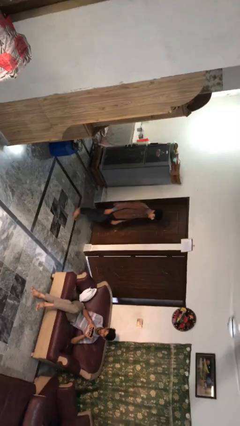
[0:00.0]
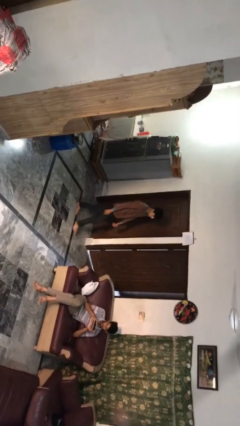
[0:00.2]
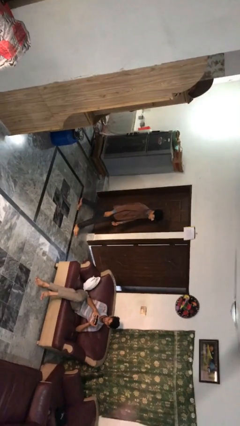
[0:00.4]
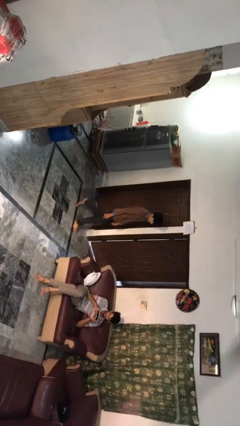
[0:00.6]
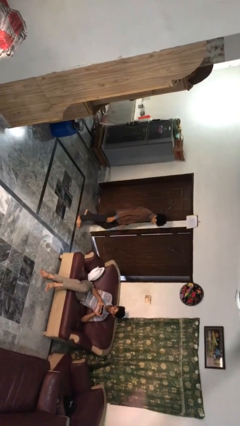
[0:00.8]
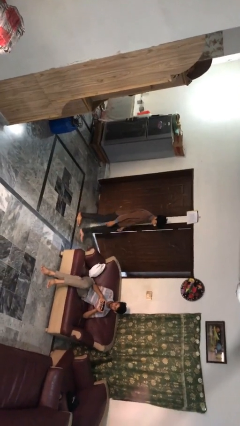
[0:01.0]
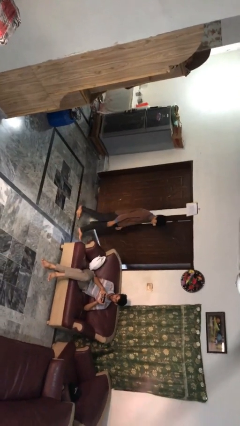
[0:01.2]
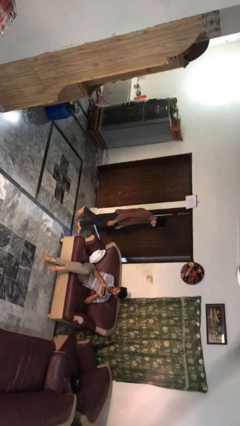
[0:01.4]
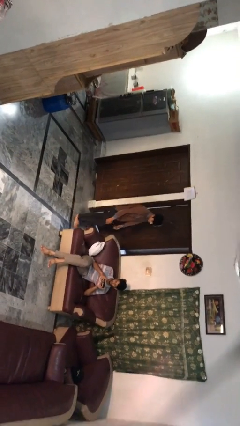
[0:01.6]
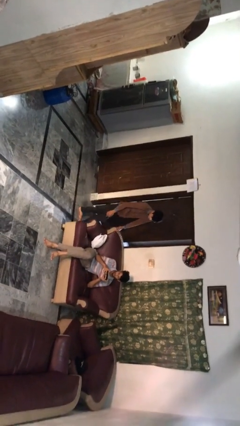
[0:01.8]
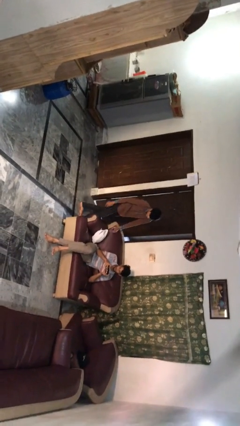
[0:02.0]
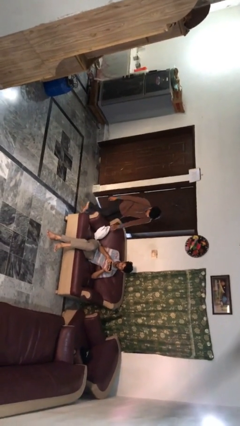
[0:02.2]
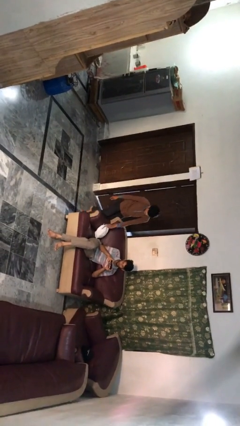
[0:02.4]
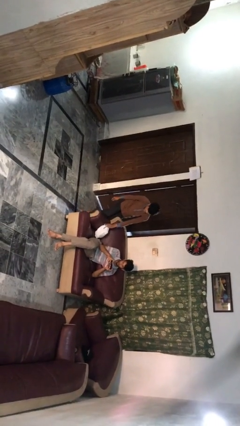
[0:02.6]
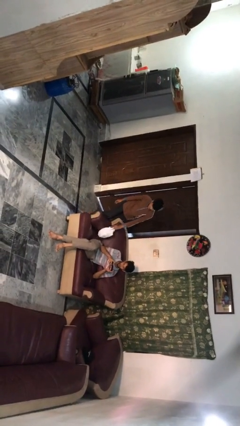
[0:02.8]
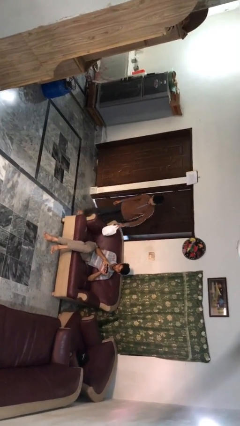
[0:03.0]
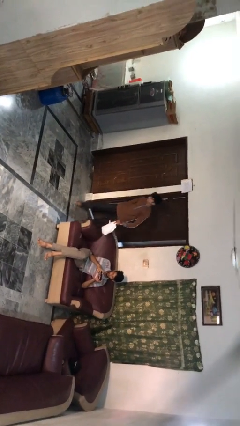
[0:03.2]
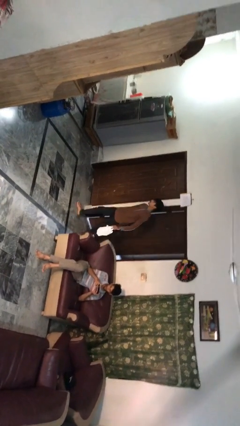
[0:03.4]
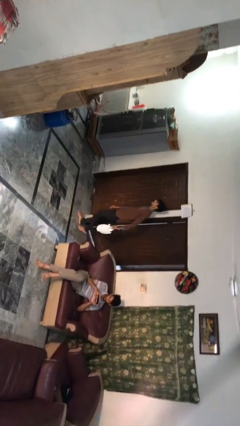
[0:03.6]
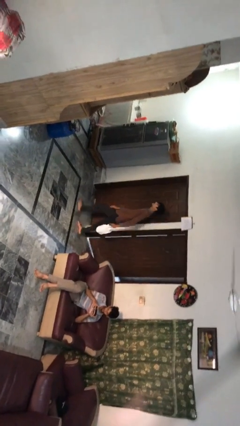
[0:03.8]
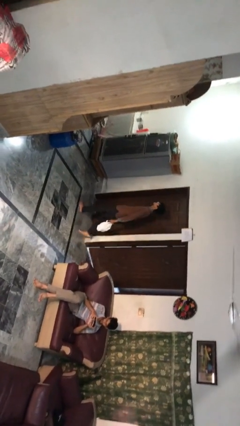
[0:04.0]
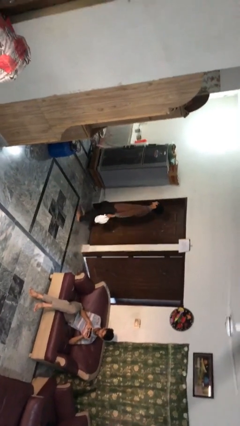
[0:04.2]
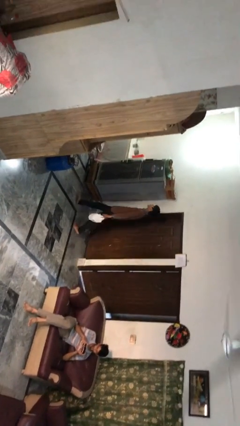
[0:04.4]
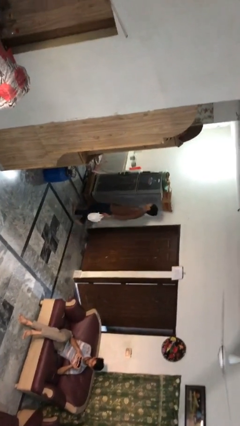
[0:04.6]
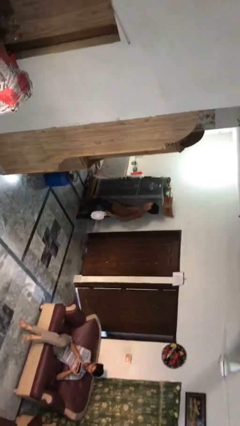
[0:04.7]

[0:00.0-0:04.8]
person steals object from person

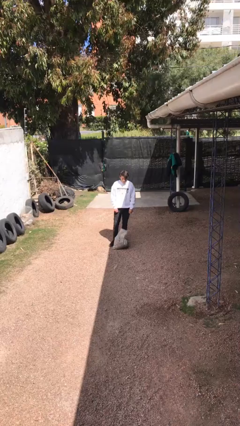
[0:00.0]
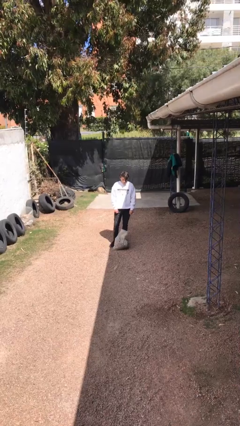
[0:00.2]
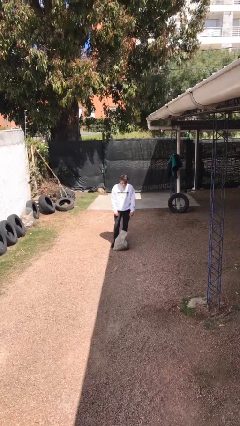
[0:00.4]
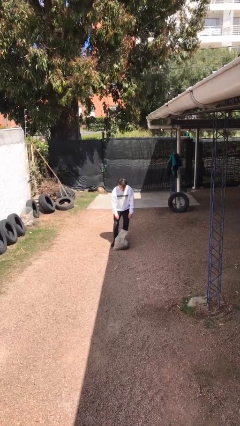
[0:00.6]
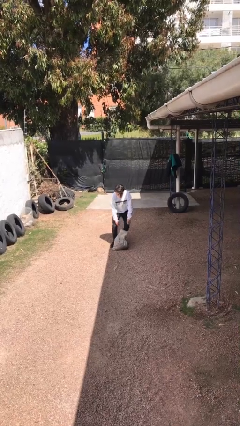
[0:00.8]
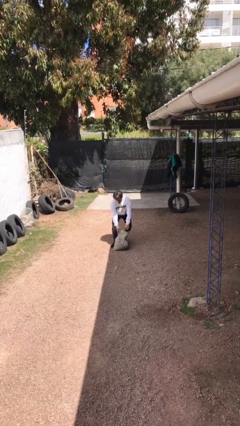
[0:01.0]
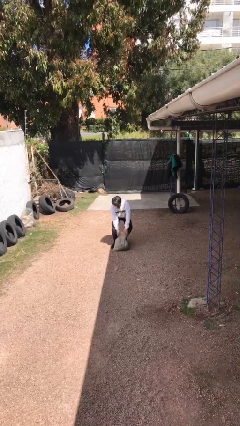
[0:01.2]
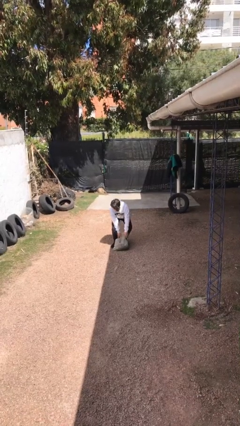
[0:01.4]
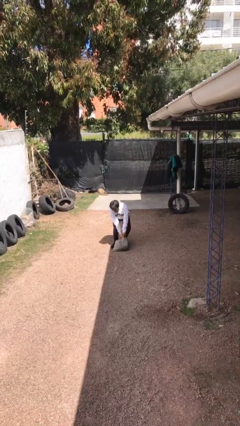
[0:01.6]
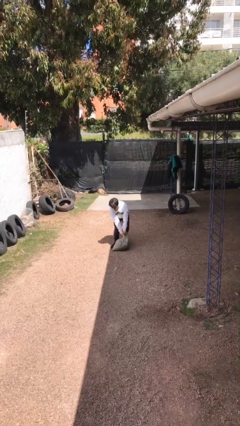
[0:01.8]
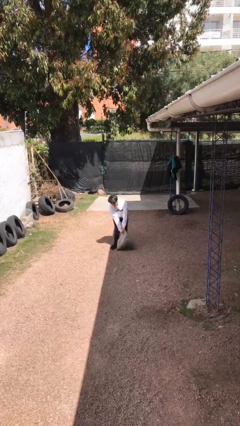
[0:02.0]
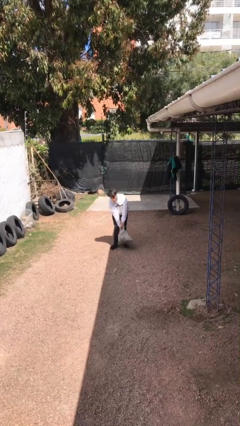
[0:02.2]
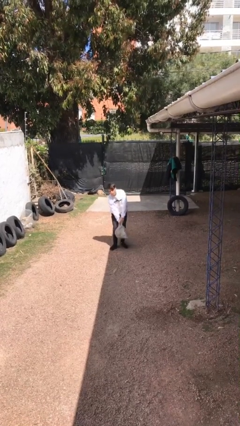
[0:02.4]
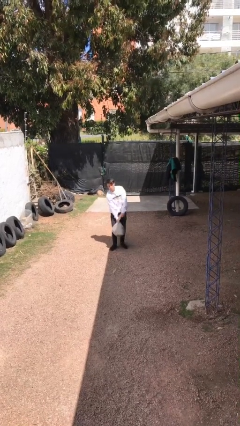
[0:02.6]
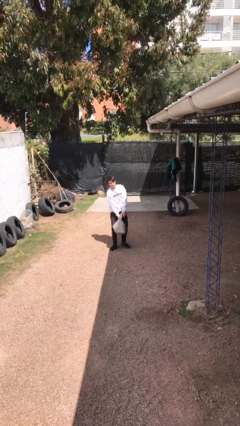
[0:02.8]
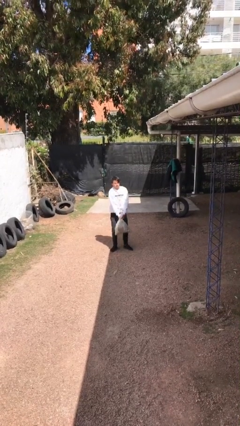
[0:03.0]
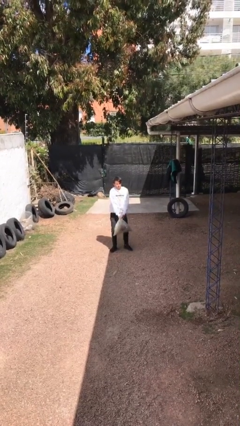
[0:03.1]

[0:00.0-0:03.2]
person picks up object from floor

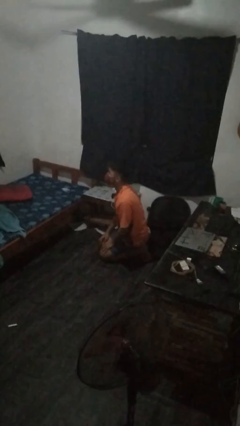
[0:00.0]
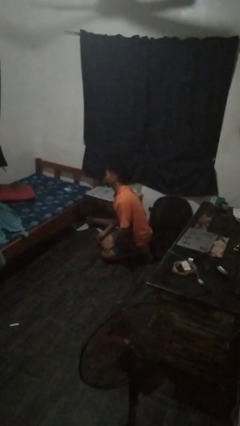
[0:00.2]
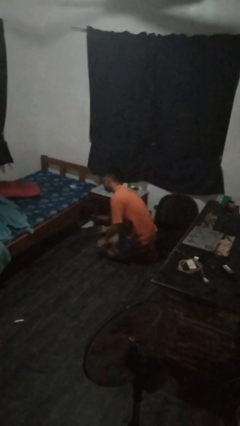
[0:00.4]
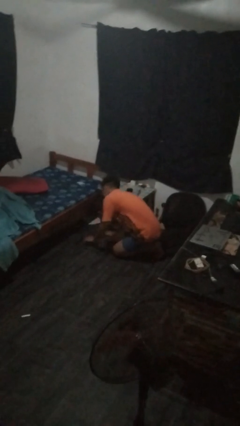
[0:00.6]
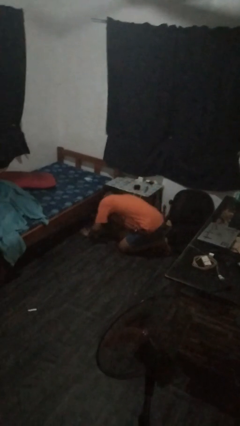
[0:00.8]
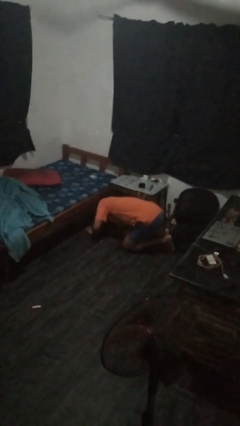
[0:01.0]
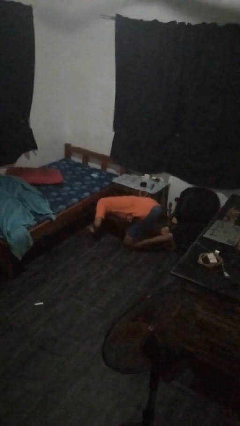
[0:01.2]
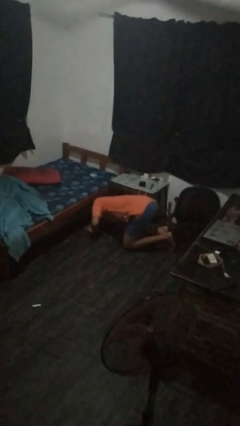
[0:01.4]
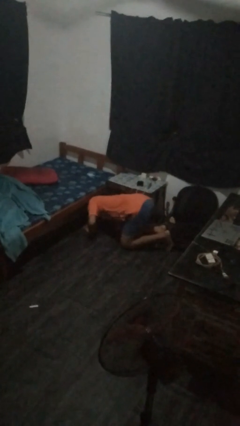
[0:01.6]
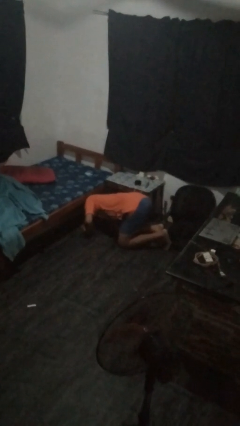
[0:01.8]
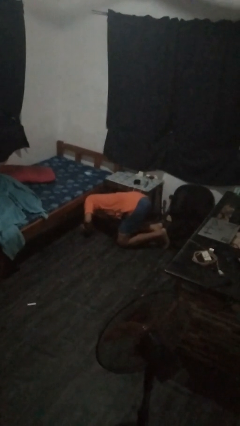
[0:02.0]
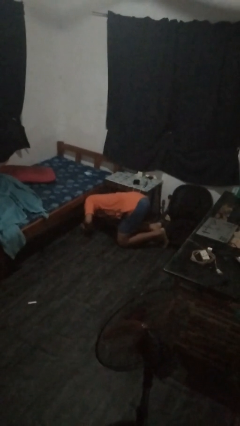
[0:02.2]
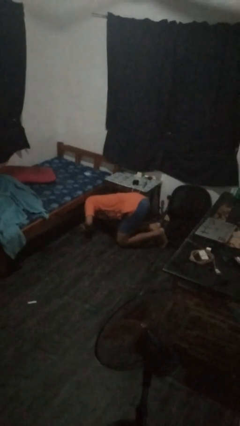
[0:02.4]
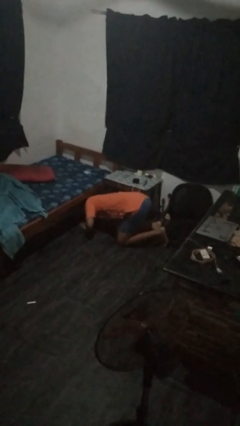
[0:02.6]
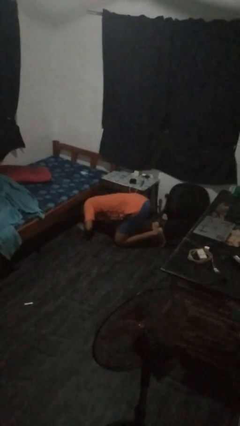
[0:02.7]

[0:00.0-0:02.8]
person searches under bed

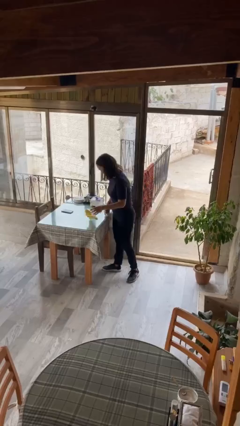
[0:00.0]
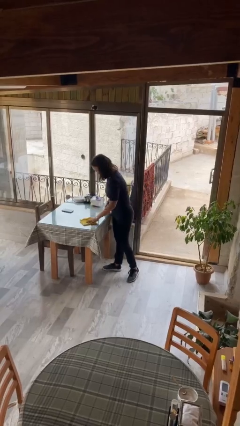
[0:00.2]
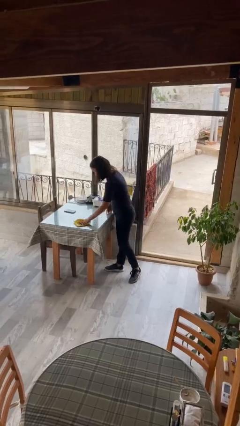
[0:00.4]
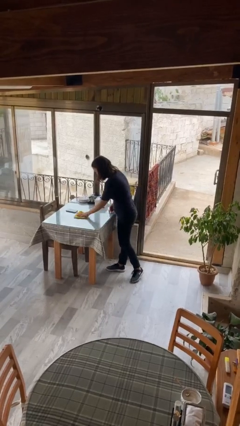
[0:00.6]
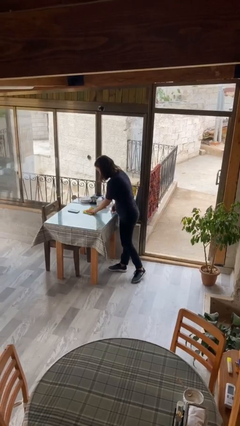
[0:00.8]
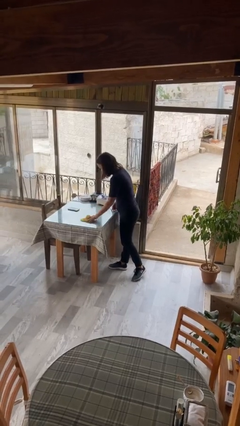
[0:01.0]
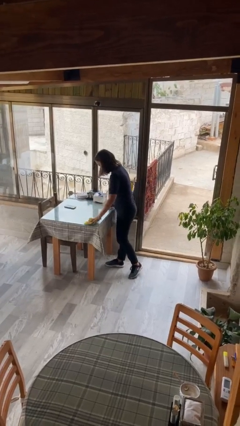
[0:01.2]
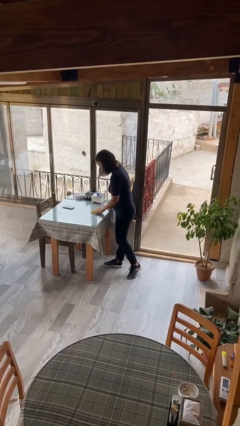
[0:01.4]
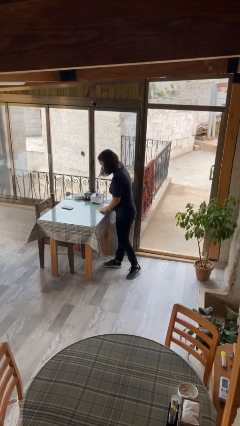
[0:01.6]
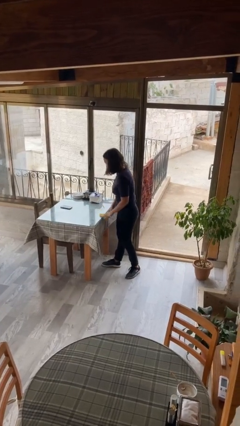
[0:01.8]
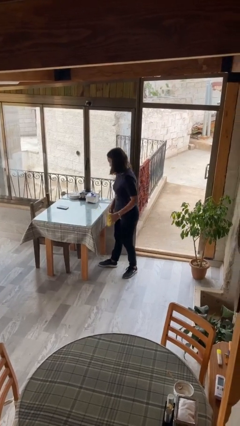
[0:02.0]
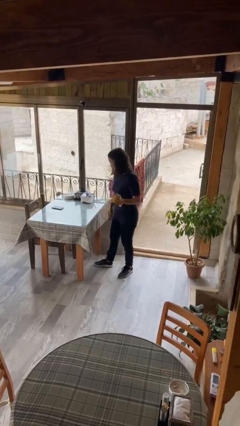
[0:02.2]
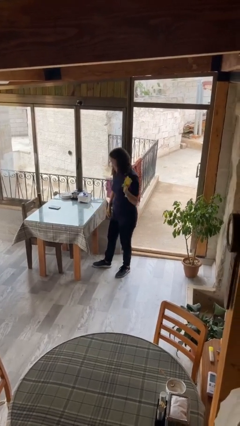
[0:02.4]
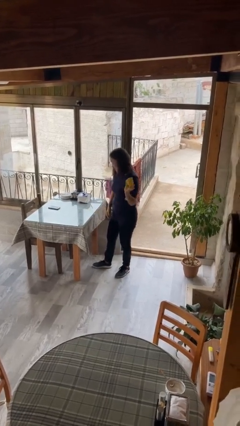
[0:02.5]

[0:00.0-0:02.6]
person cleans table with rag

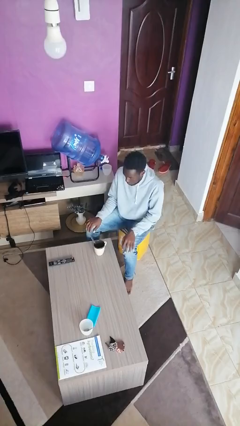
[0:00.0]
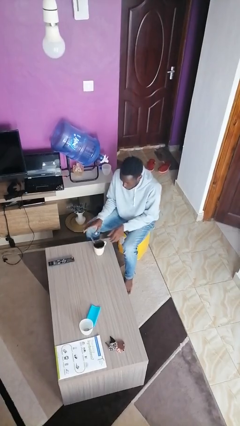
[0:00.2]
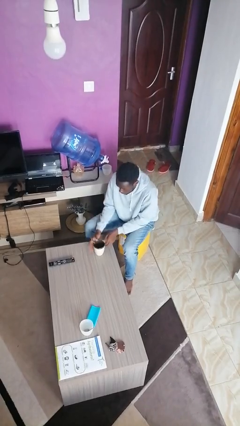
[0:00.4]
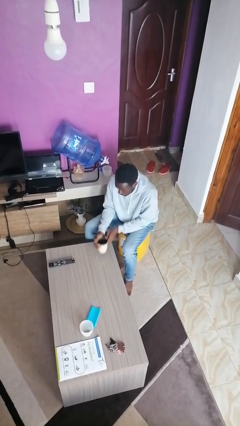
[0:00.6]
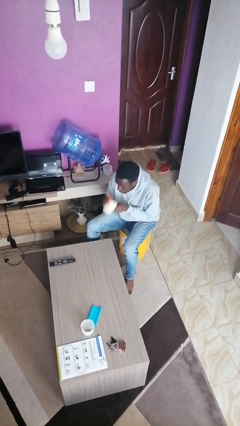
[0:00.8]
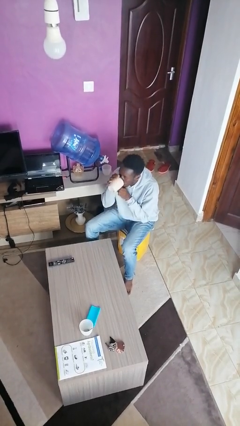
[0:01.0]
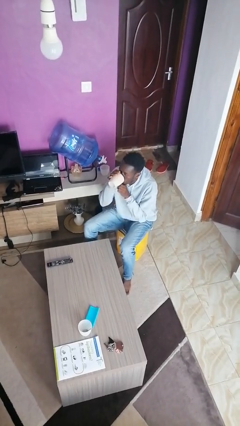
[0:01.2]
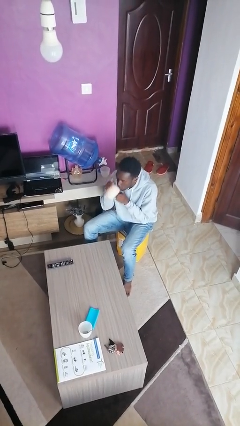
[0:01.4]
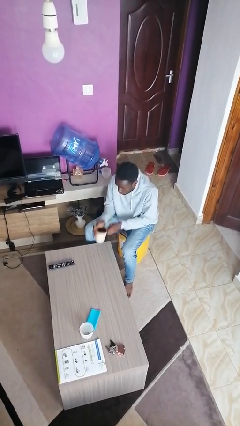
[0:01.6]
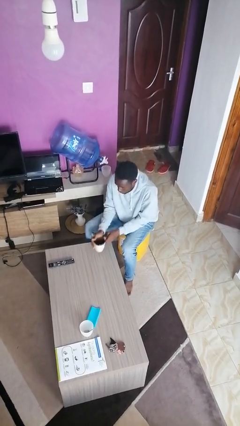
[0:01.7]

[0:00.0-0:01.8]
person drinks from mug

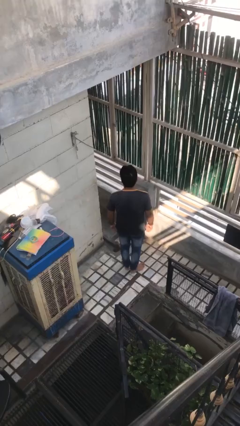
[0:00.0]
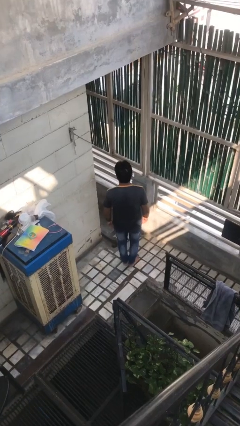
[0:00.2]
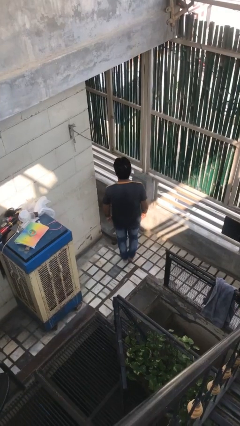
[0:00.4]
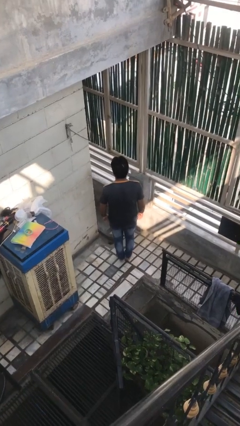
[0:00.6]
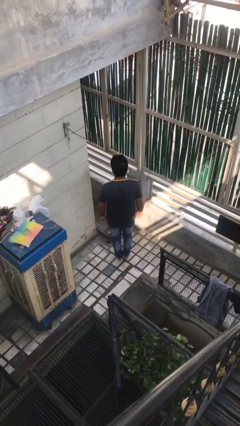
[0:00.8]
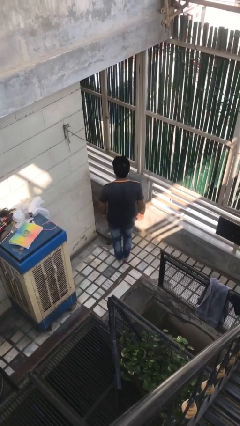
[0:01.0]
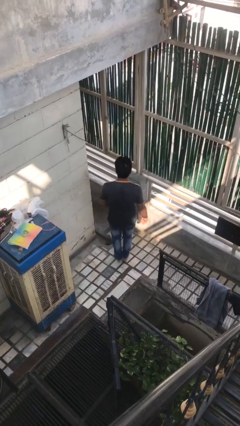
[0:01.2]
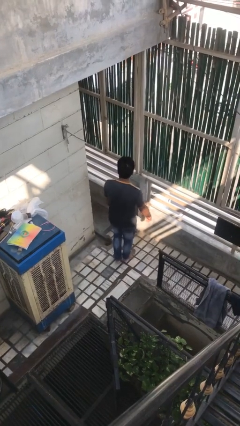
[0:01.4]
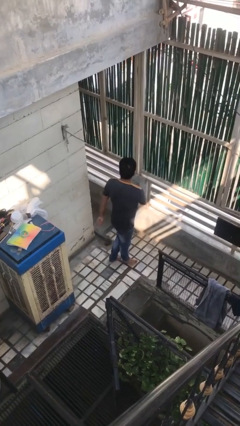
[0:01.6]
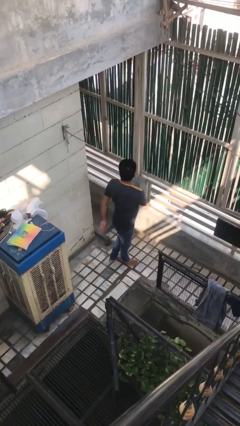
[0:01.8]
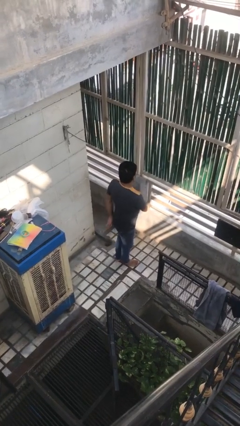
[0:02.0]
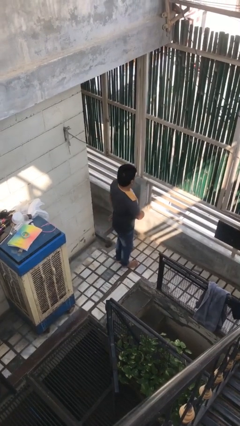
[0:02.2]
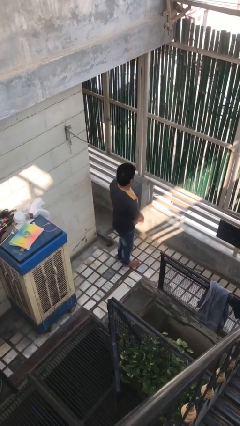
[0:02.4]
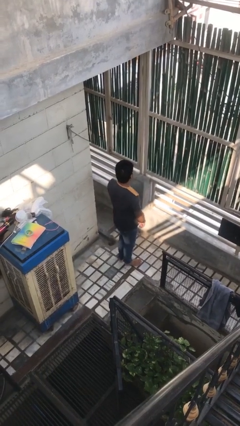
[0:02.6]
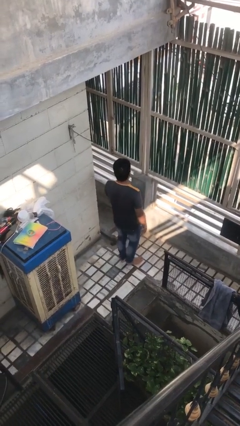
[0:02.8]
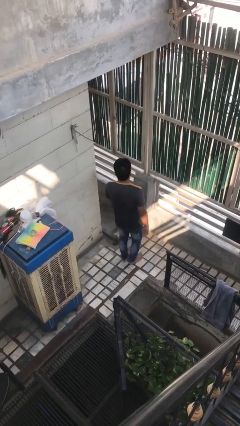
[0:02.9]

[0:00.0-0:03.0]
person twirls
